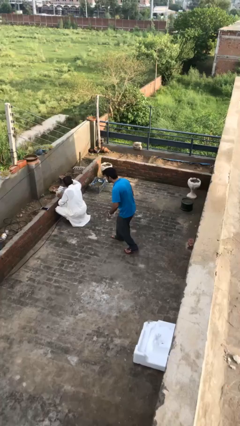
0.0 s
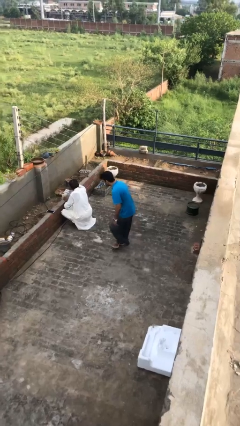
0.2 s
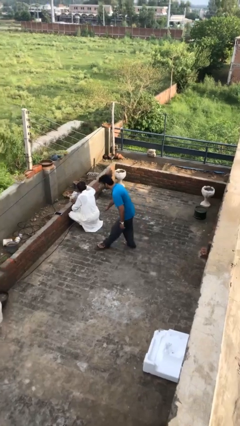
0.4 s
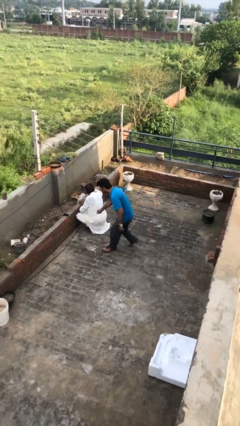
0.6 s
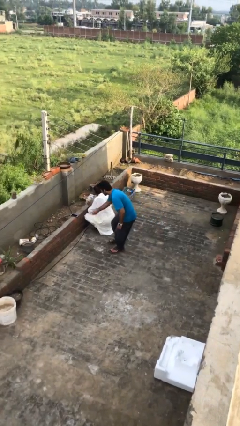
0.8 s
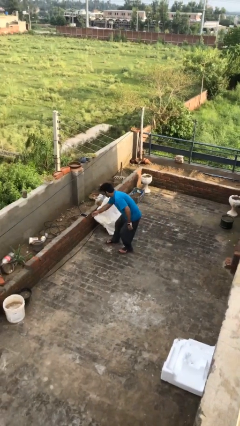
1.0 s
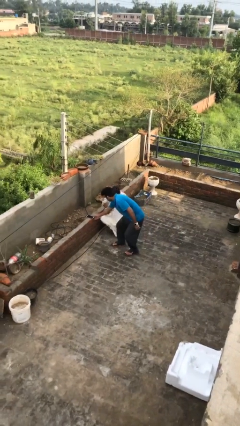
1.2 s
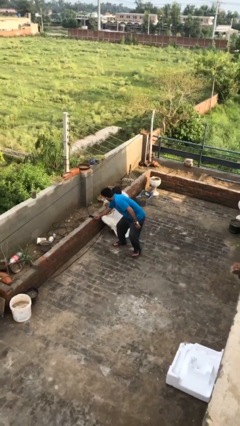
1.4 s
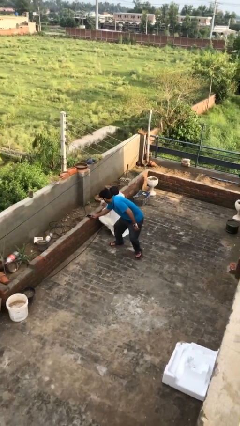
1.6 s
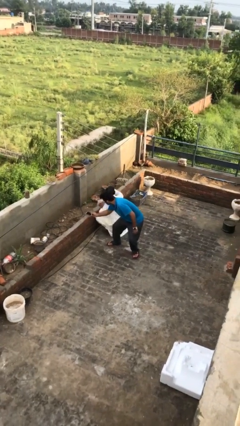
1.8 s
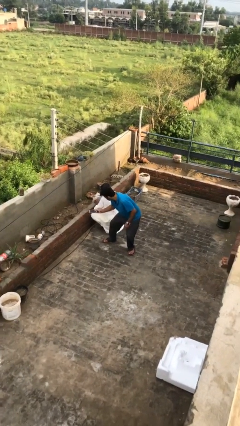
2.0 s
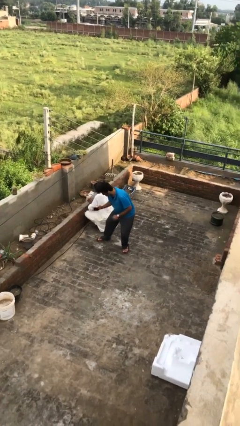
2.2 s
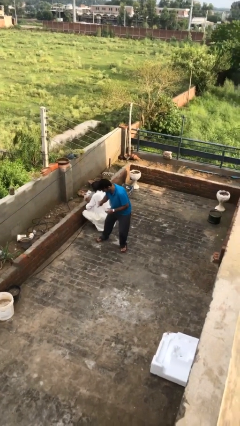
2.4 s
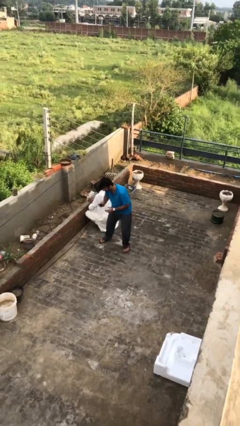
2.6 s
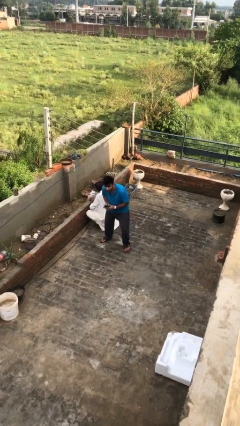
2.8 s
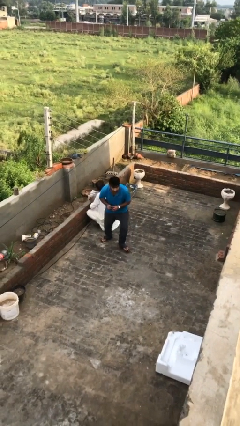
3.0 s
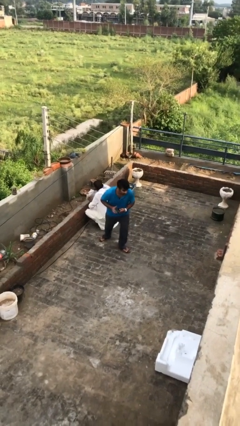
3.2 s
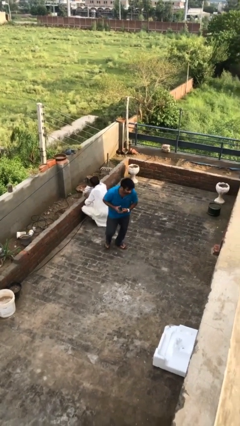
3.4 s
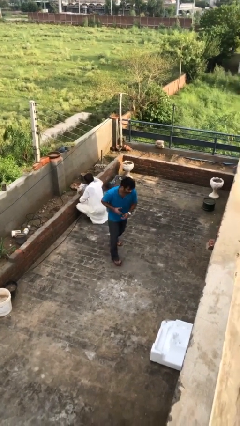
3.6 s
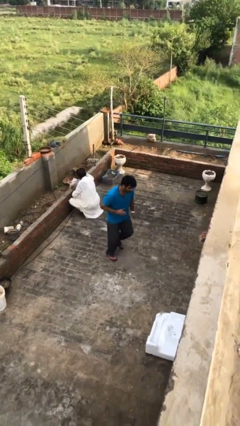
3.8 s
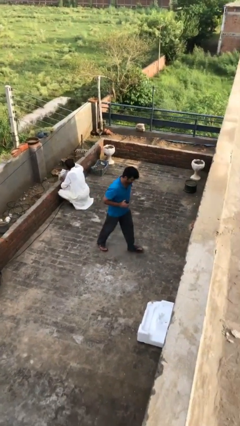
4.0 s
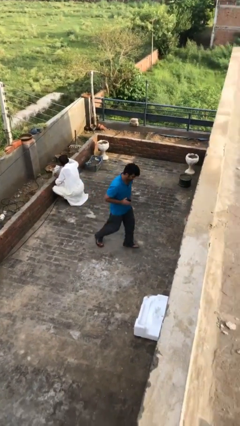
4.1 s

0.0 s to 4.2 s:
person steals object from person

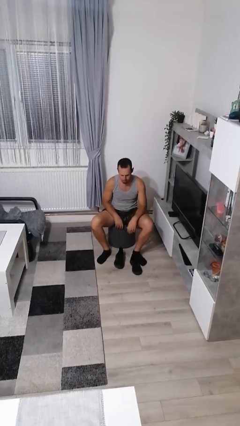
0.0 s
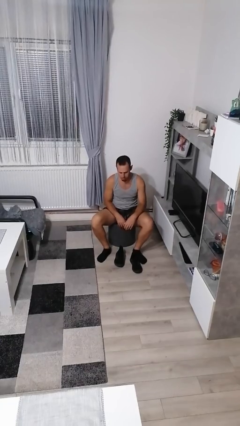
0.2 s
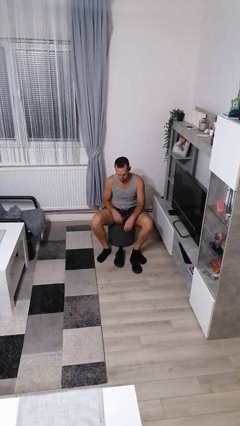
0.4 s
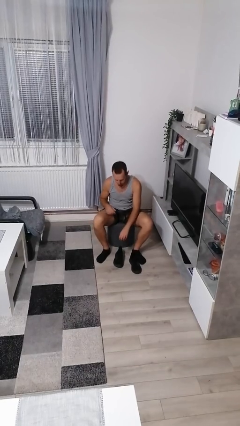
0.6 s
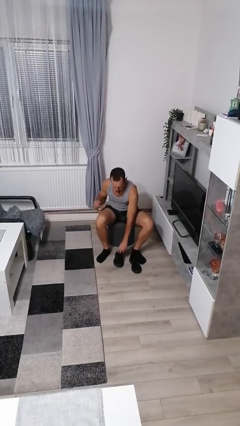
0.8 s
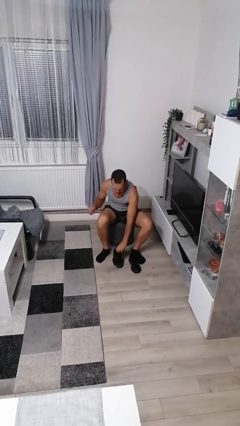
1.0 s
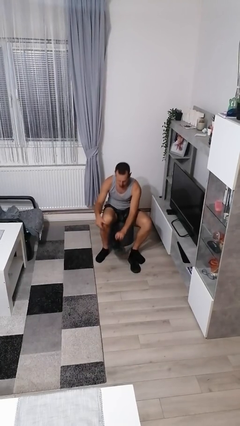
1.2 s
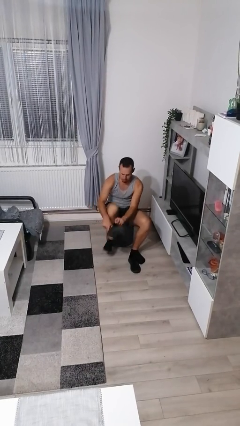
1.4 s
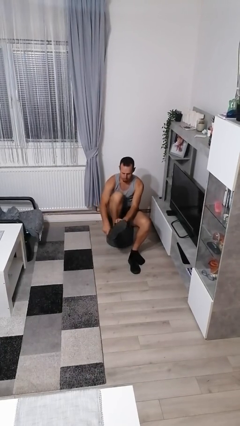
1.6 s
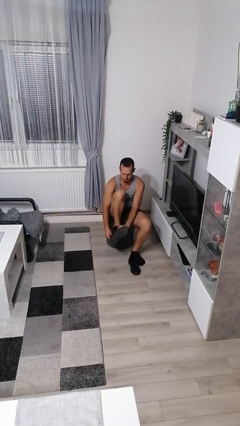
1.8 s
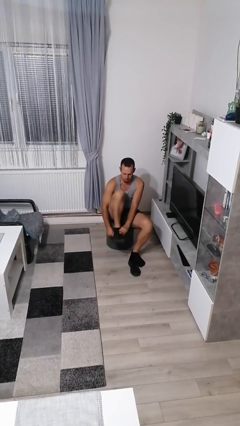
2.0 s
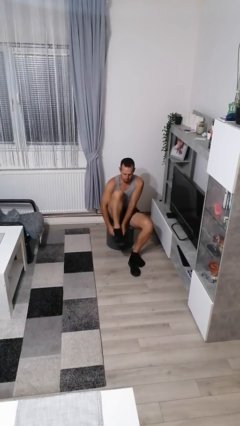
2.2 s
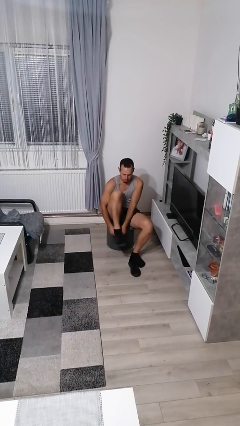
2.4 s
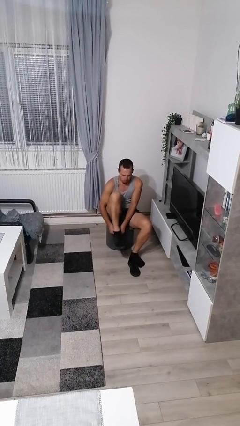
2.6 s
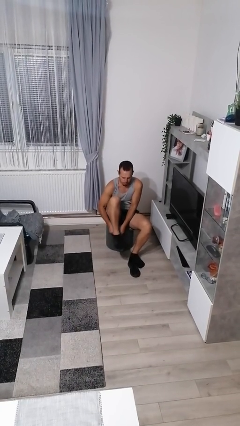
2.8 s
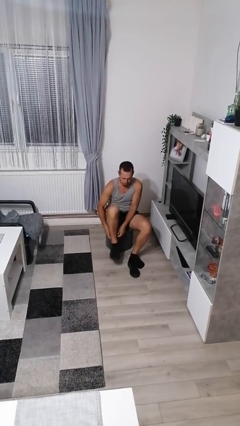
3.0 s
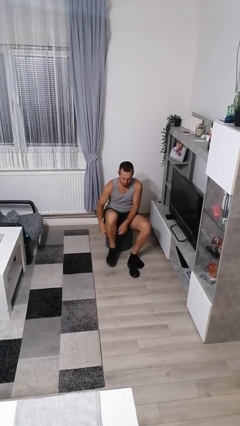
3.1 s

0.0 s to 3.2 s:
person puts on shoes

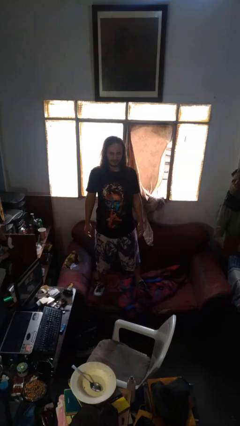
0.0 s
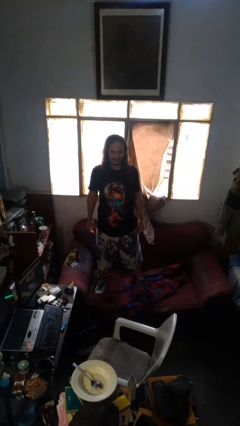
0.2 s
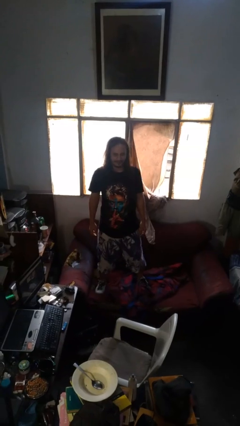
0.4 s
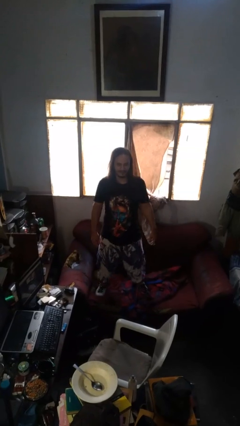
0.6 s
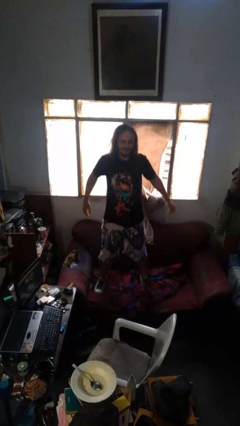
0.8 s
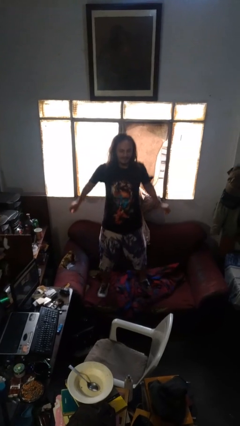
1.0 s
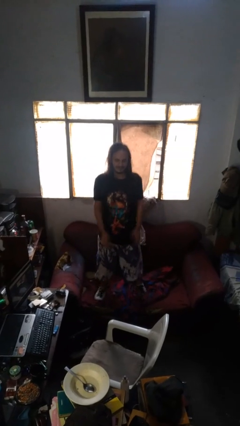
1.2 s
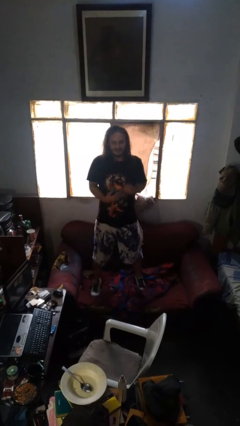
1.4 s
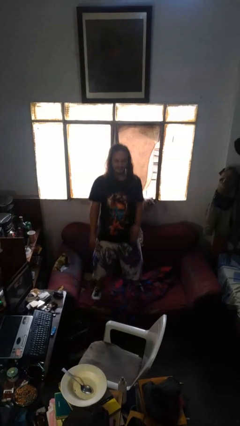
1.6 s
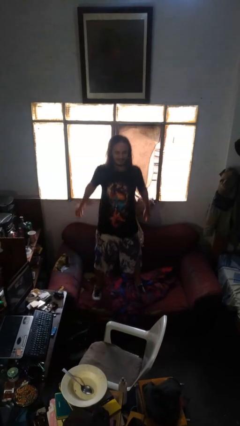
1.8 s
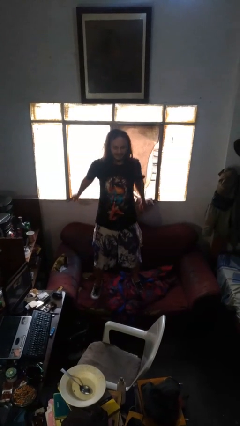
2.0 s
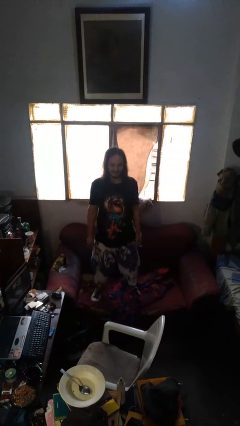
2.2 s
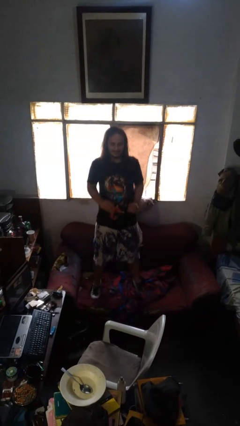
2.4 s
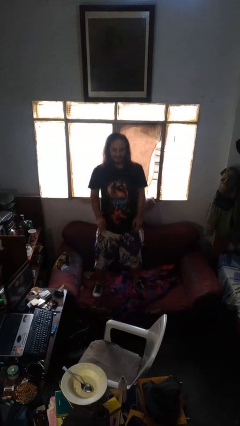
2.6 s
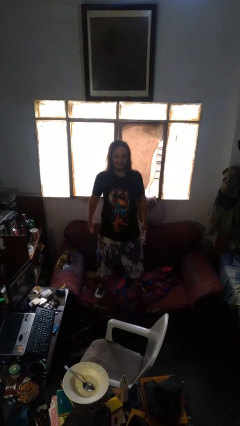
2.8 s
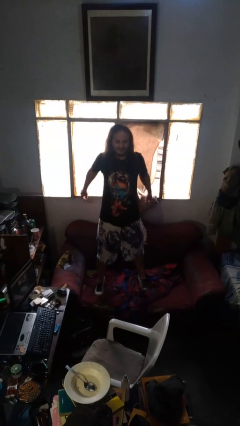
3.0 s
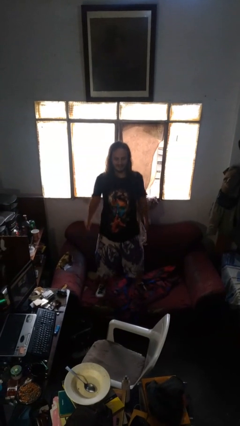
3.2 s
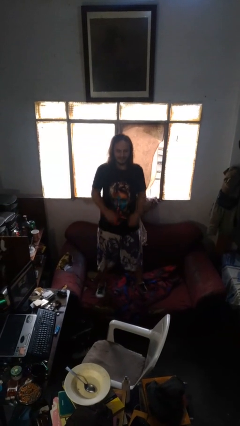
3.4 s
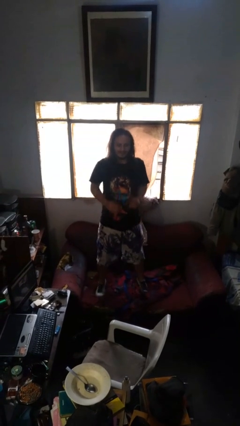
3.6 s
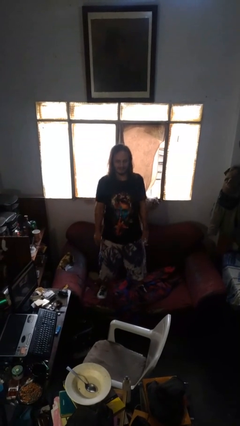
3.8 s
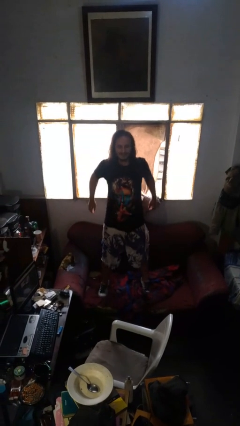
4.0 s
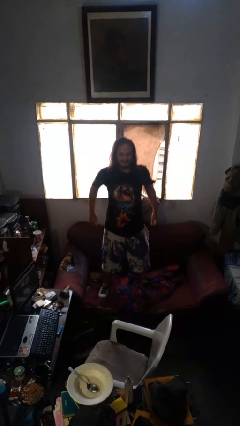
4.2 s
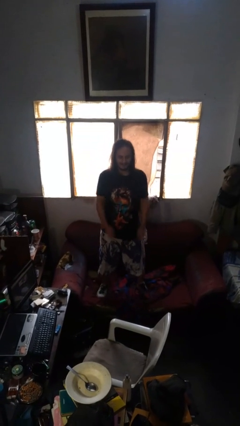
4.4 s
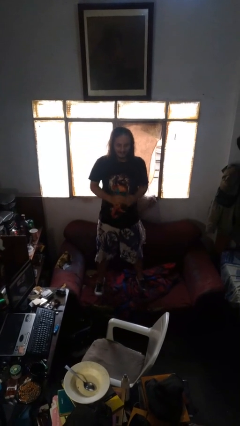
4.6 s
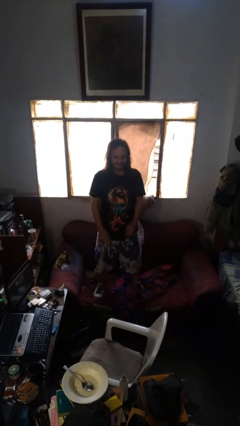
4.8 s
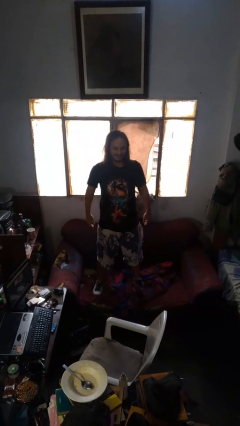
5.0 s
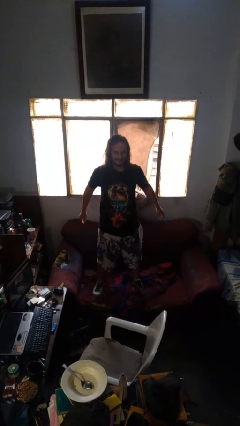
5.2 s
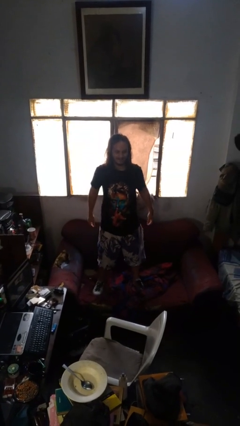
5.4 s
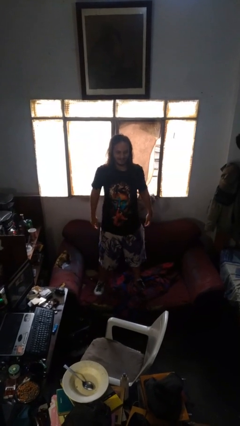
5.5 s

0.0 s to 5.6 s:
person jumps on couch

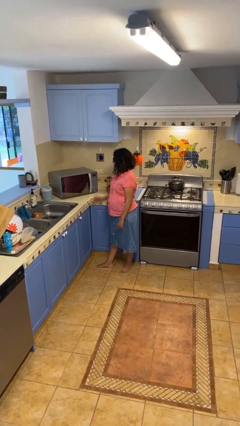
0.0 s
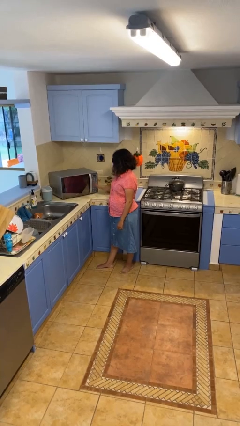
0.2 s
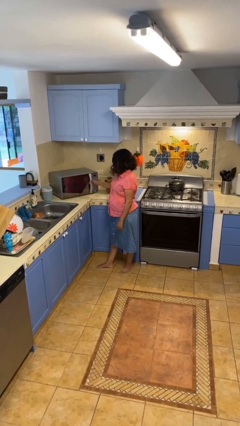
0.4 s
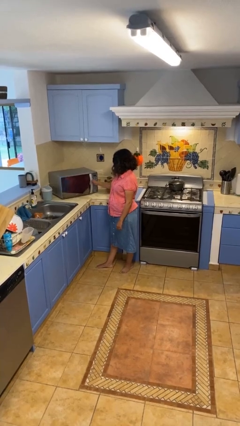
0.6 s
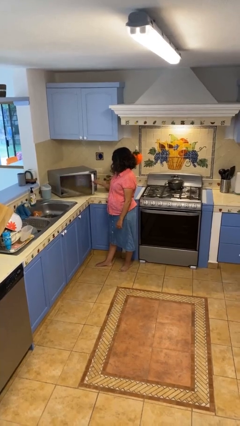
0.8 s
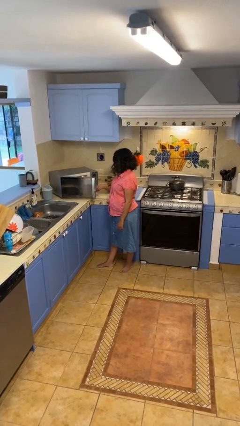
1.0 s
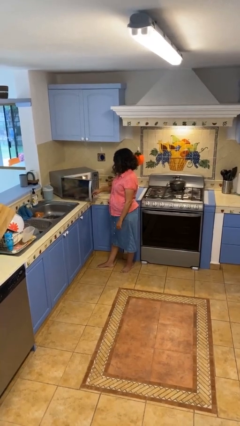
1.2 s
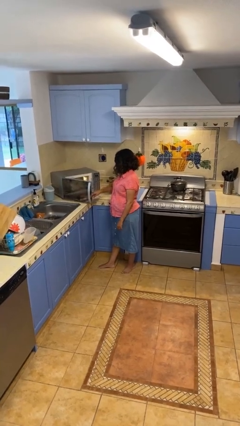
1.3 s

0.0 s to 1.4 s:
person opens microwave

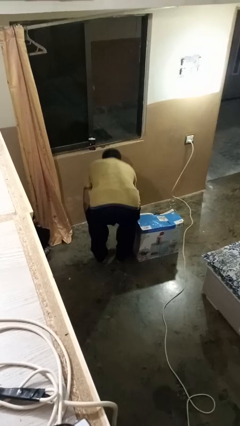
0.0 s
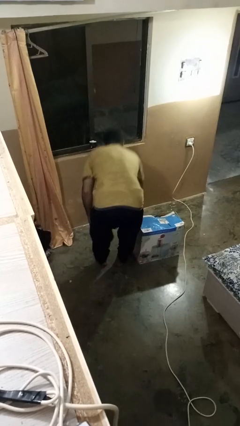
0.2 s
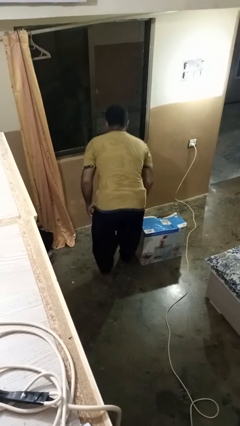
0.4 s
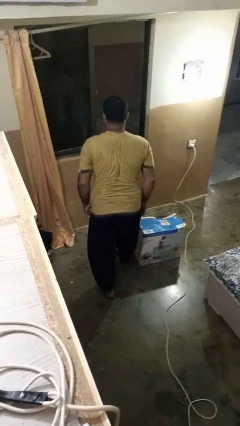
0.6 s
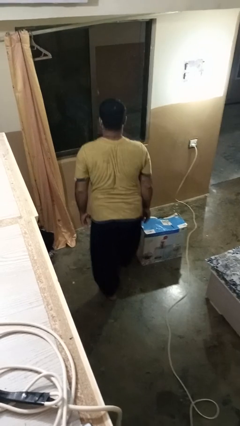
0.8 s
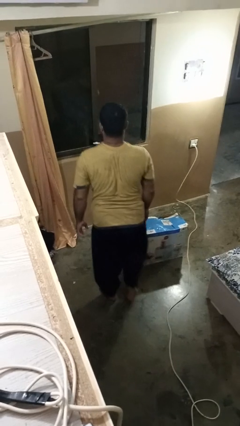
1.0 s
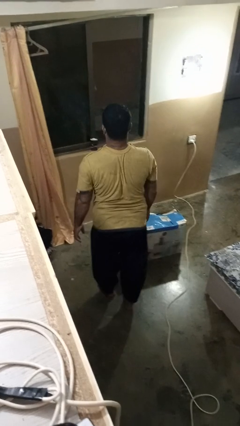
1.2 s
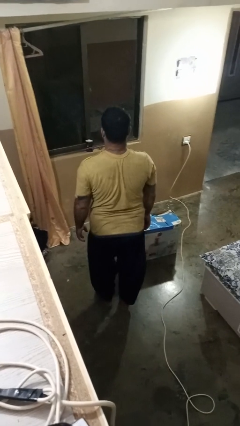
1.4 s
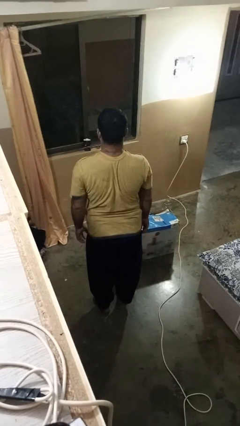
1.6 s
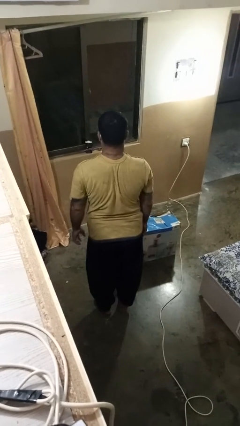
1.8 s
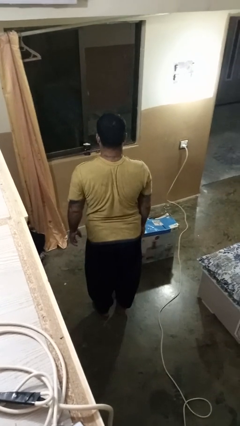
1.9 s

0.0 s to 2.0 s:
person stands up from floor

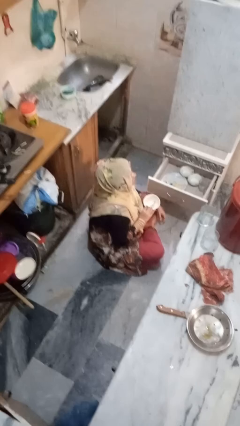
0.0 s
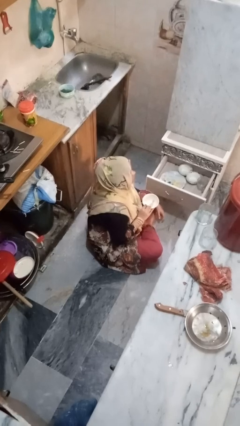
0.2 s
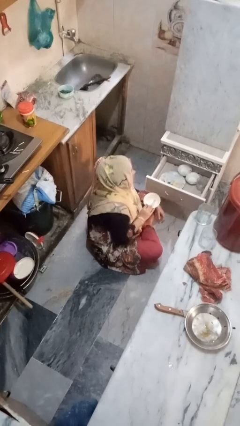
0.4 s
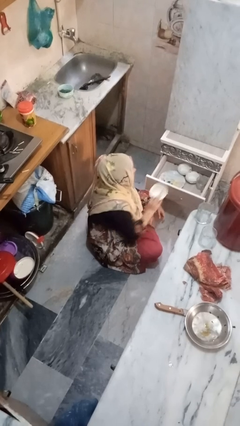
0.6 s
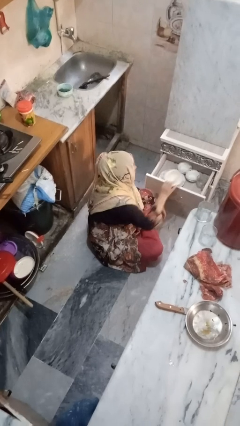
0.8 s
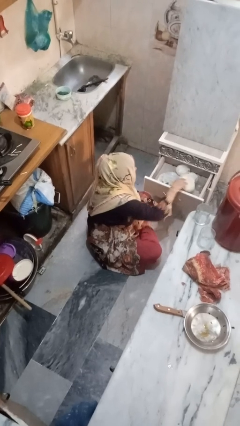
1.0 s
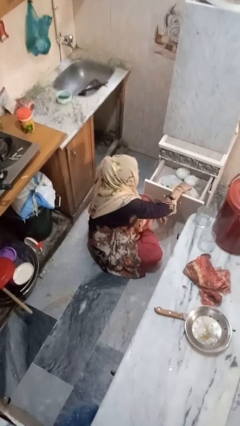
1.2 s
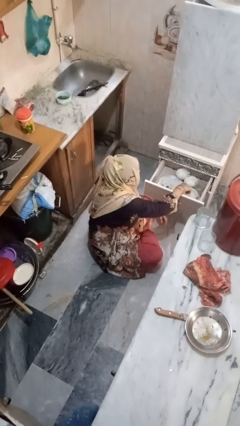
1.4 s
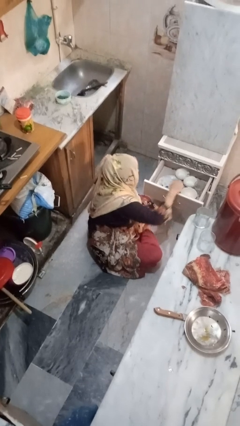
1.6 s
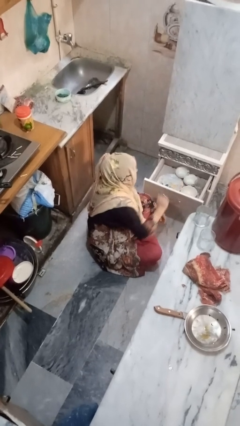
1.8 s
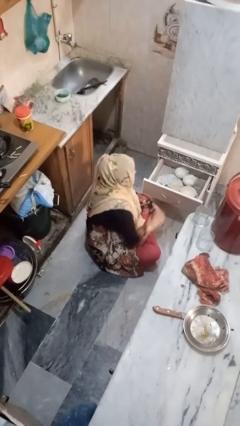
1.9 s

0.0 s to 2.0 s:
person puts object into kitchen drawer
